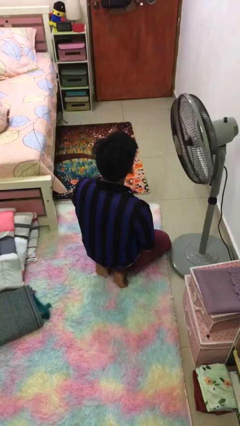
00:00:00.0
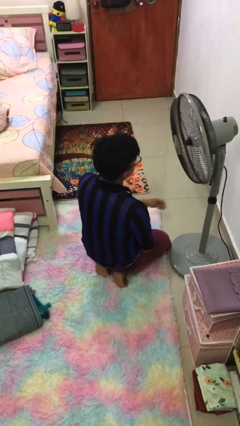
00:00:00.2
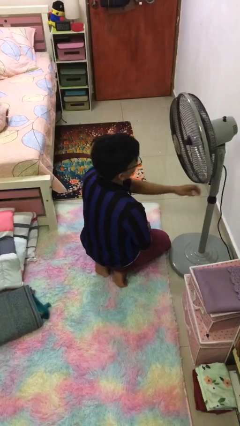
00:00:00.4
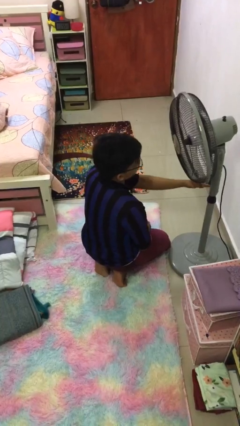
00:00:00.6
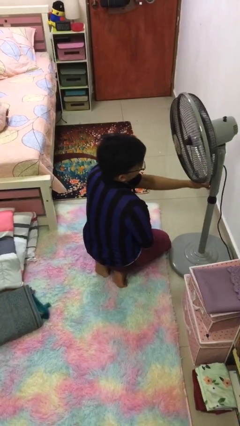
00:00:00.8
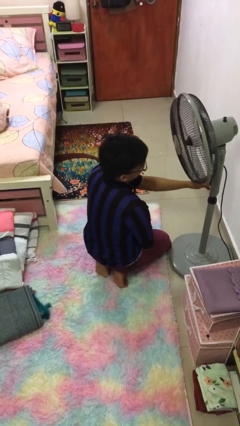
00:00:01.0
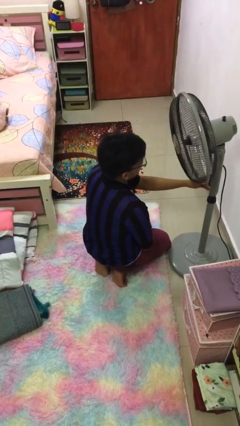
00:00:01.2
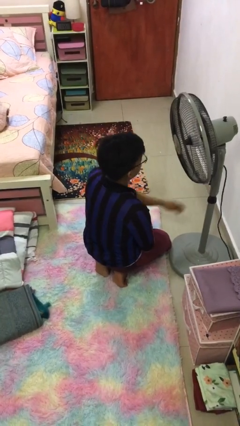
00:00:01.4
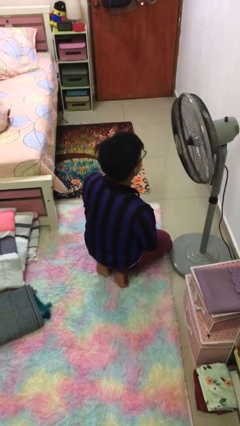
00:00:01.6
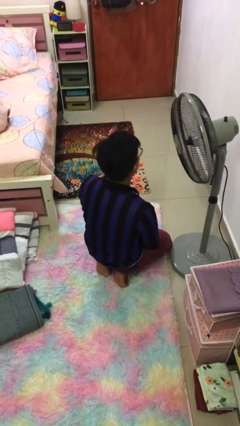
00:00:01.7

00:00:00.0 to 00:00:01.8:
person turns off fan

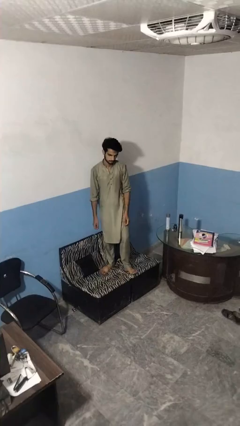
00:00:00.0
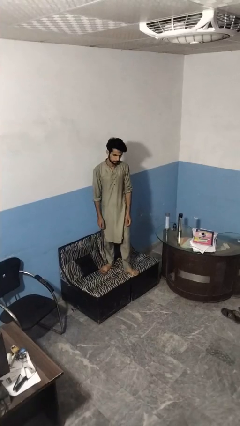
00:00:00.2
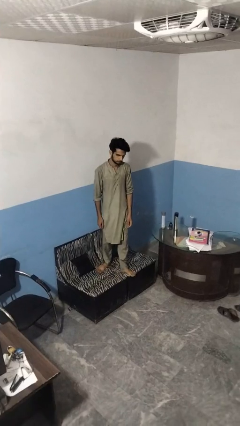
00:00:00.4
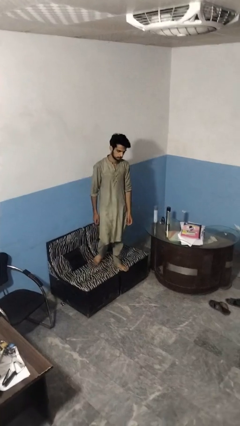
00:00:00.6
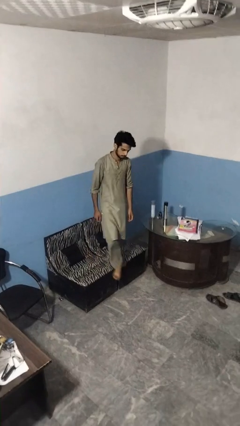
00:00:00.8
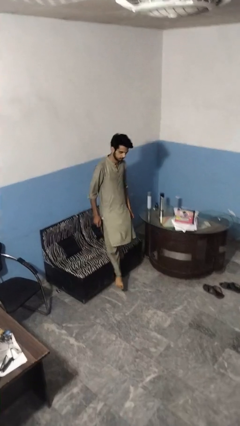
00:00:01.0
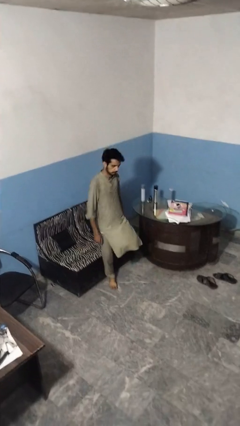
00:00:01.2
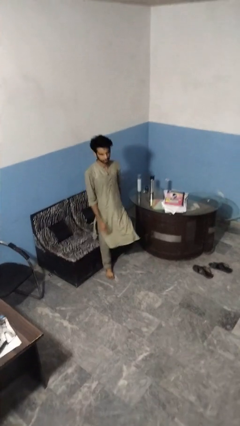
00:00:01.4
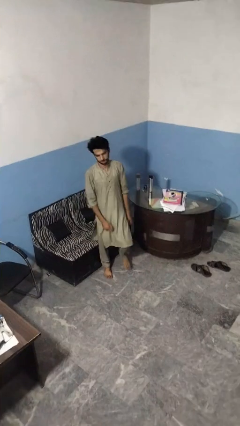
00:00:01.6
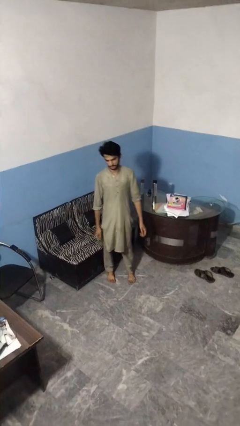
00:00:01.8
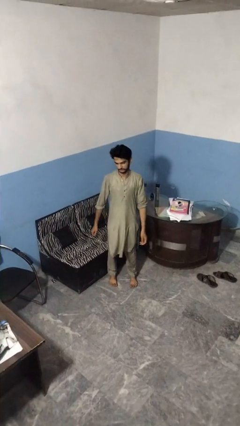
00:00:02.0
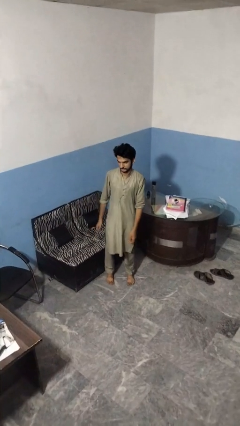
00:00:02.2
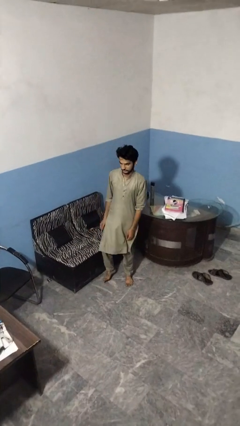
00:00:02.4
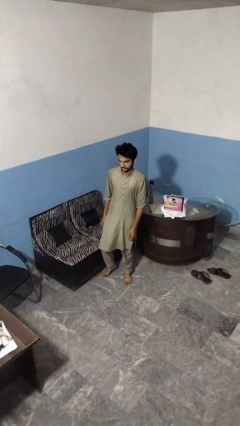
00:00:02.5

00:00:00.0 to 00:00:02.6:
person climbs off couch

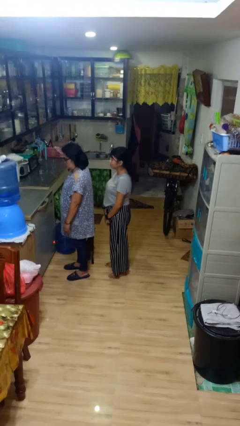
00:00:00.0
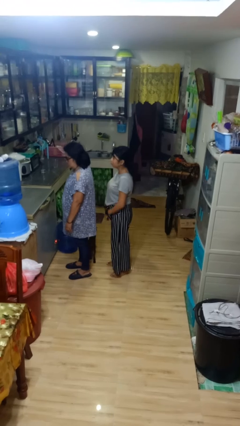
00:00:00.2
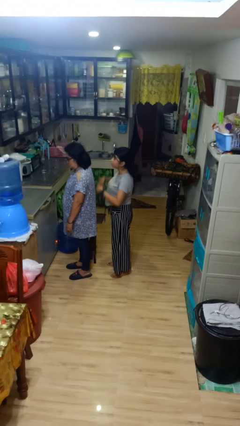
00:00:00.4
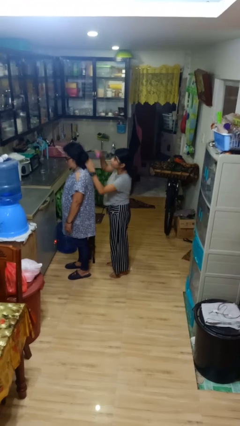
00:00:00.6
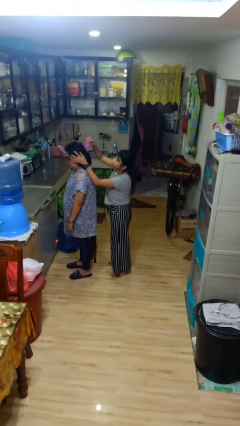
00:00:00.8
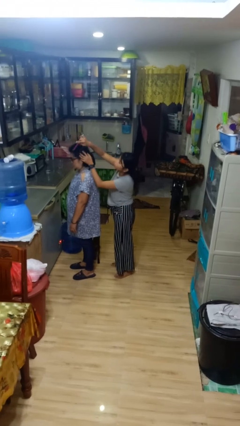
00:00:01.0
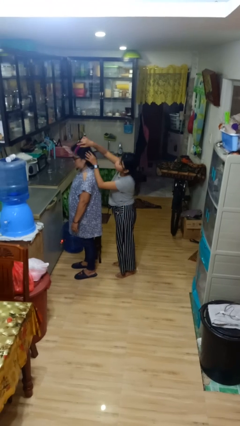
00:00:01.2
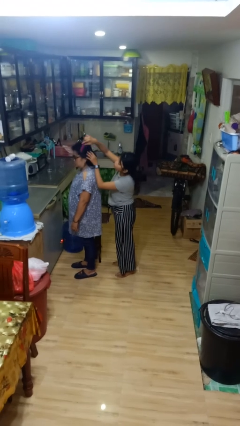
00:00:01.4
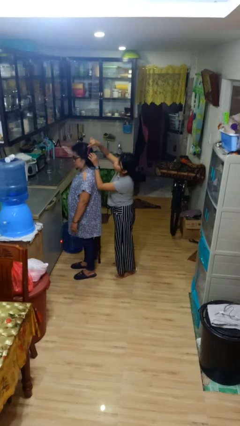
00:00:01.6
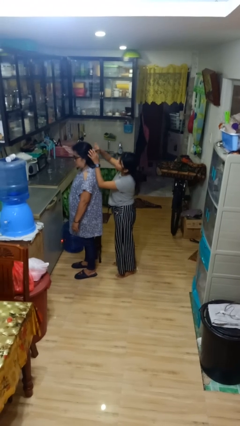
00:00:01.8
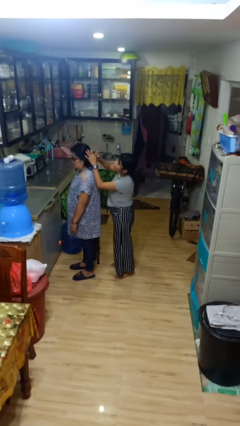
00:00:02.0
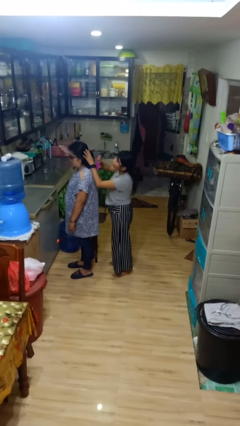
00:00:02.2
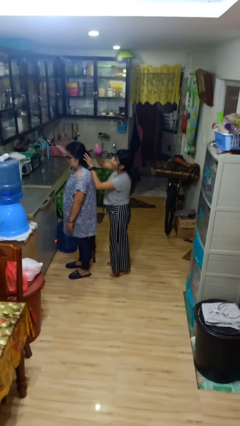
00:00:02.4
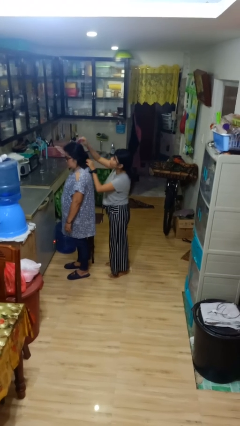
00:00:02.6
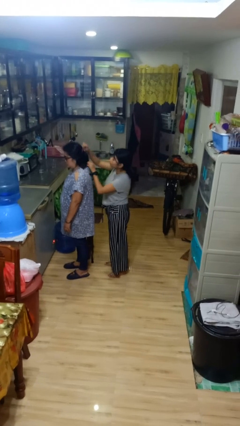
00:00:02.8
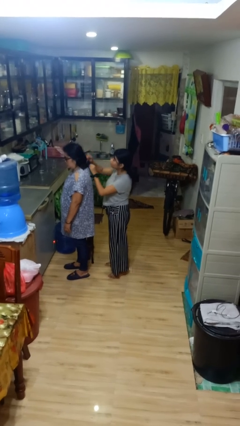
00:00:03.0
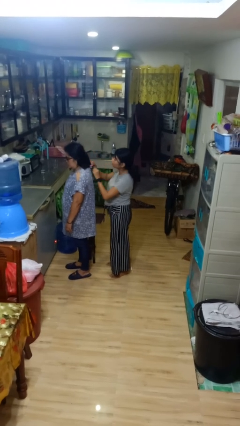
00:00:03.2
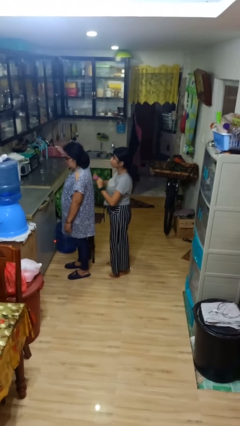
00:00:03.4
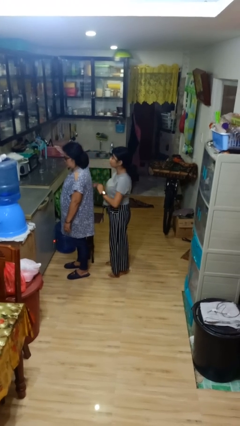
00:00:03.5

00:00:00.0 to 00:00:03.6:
person brushes hair of person

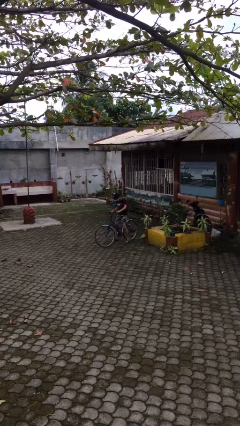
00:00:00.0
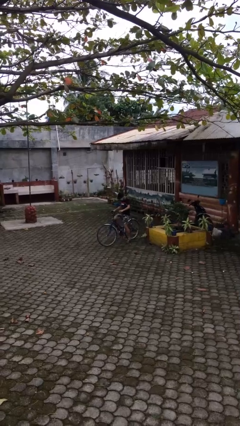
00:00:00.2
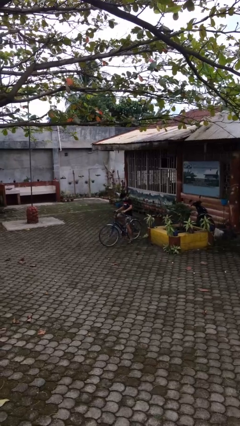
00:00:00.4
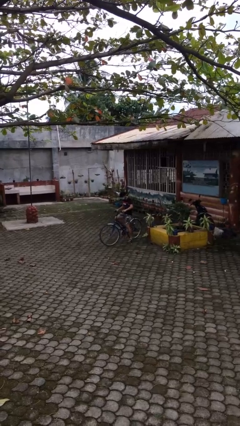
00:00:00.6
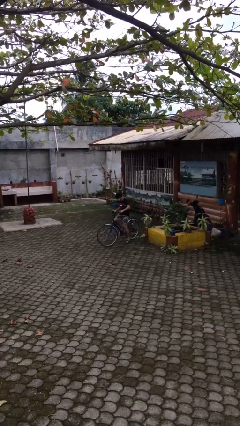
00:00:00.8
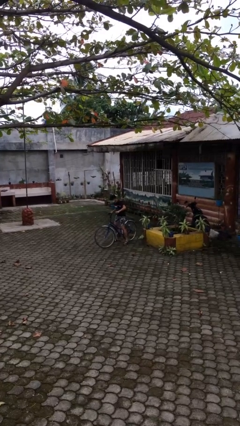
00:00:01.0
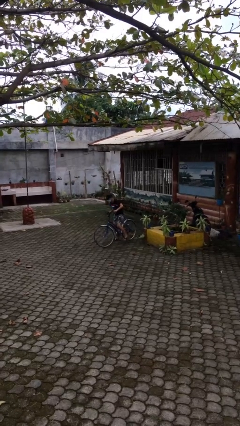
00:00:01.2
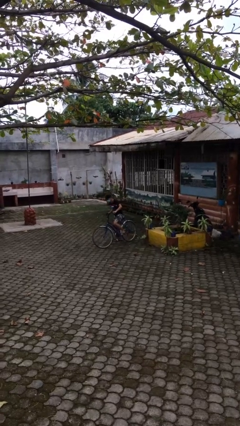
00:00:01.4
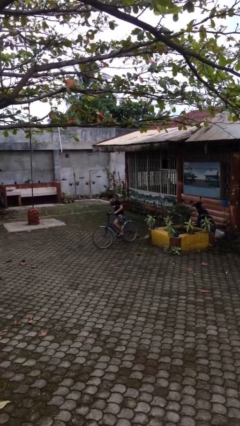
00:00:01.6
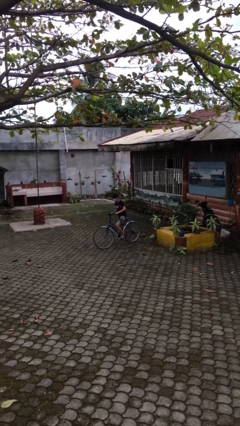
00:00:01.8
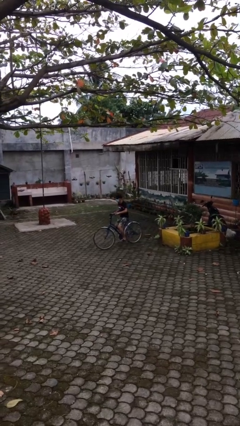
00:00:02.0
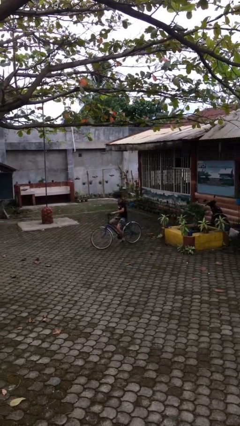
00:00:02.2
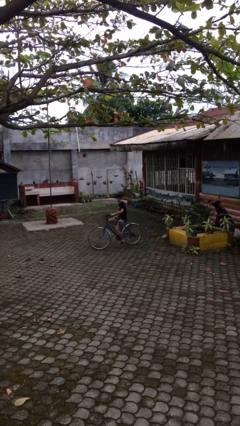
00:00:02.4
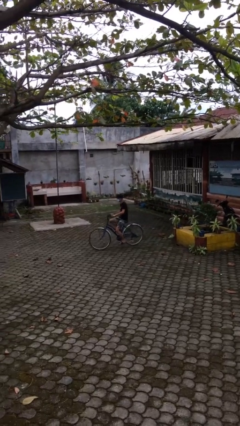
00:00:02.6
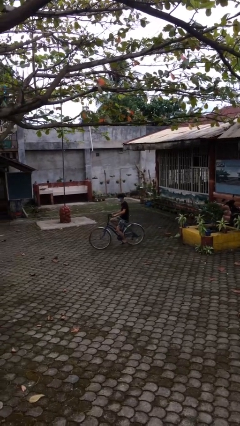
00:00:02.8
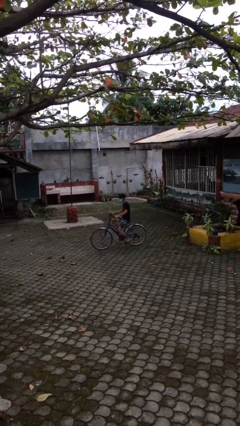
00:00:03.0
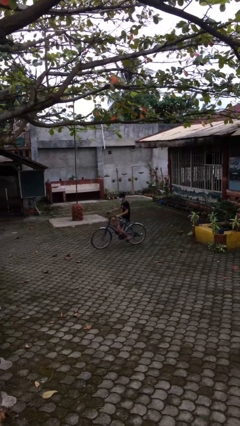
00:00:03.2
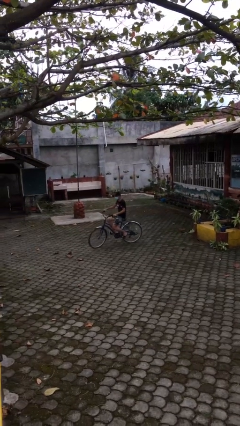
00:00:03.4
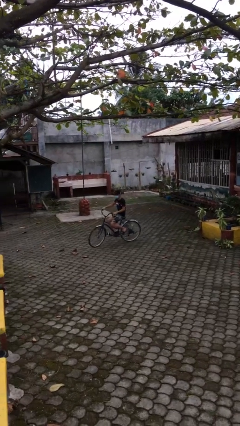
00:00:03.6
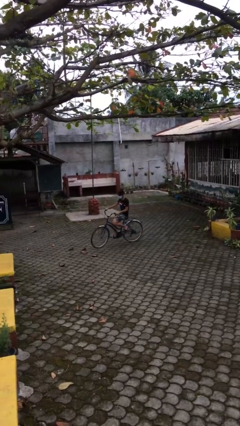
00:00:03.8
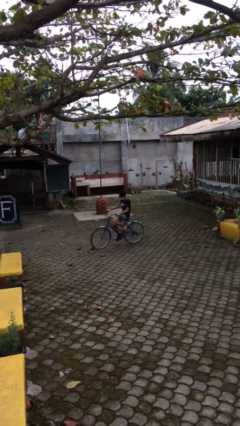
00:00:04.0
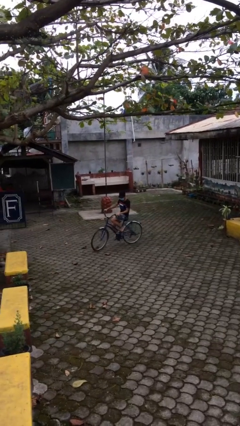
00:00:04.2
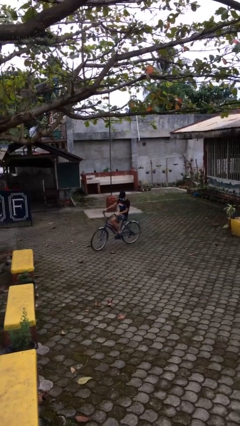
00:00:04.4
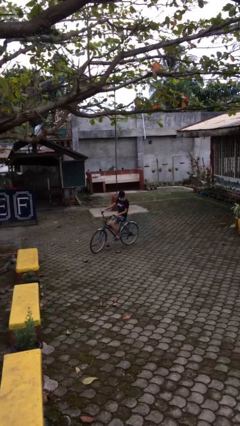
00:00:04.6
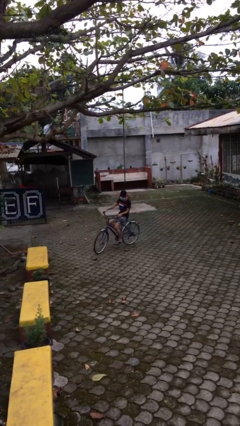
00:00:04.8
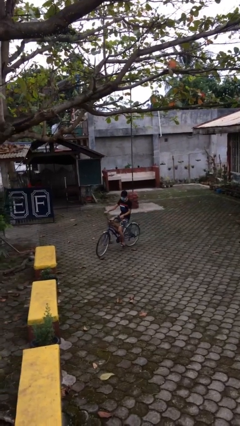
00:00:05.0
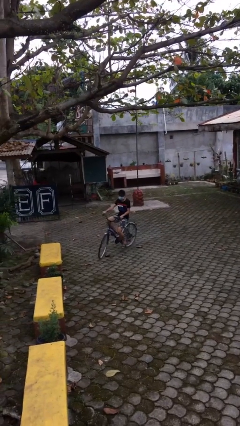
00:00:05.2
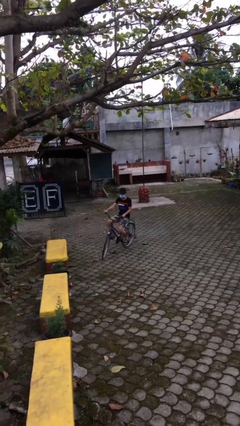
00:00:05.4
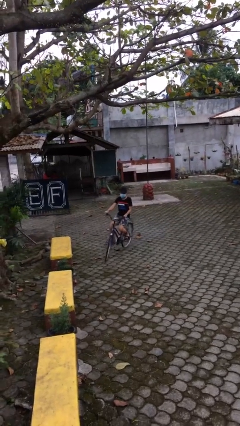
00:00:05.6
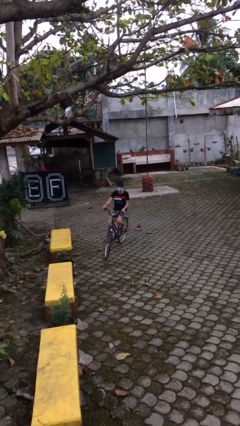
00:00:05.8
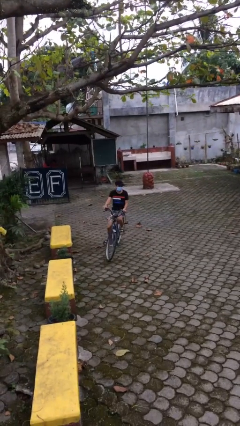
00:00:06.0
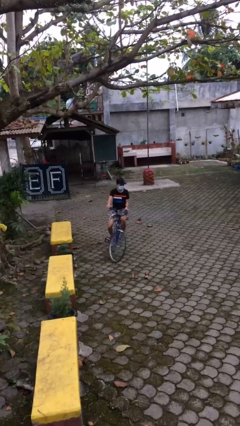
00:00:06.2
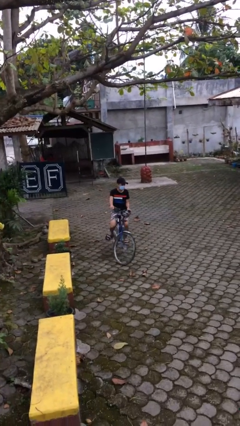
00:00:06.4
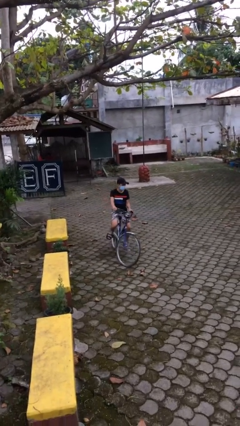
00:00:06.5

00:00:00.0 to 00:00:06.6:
person rides bicycle

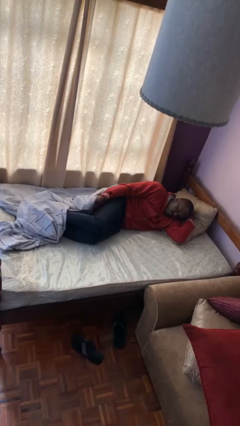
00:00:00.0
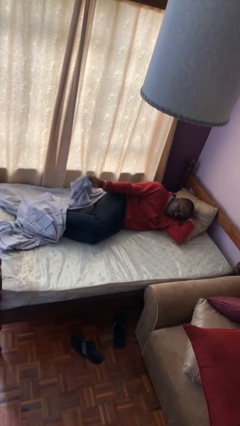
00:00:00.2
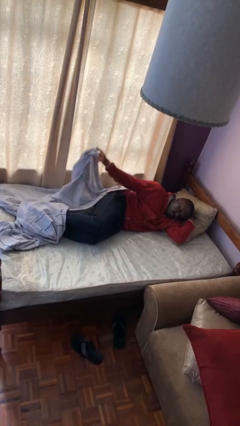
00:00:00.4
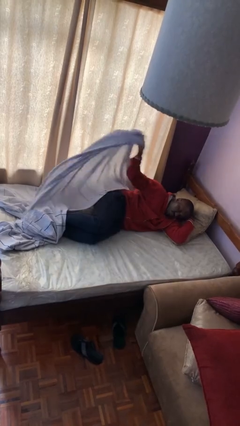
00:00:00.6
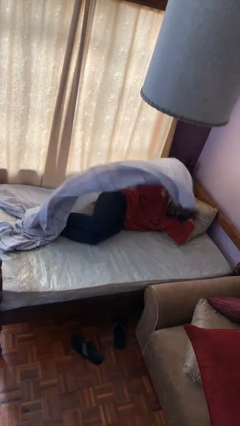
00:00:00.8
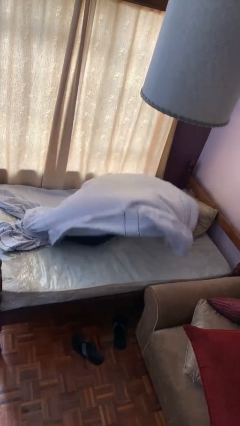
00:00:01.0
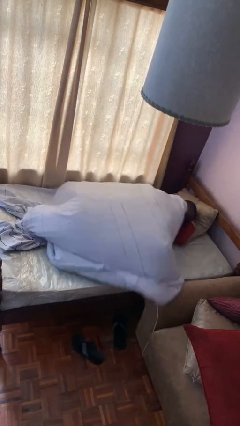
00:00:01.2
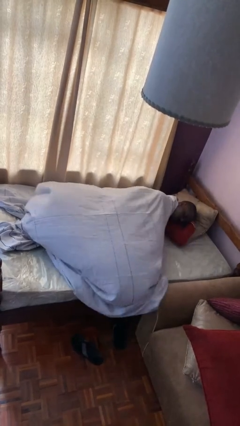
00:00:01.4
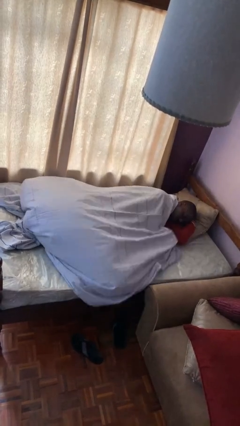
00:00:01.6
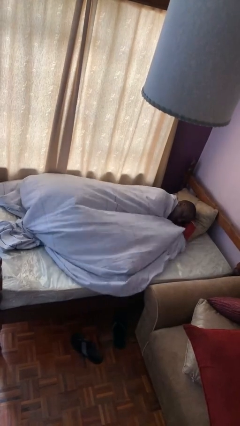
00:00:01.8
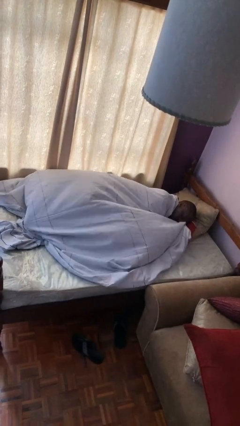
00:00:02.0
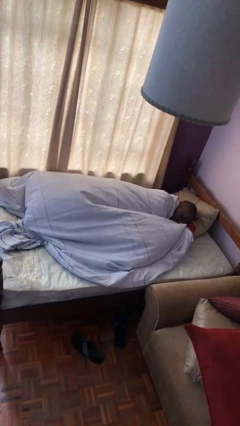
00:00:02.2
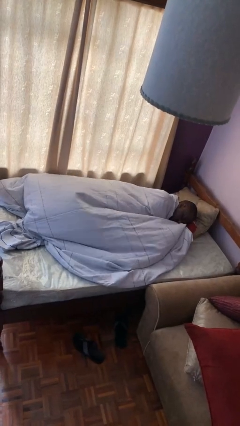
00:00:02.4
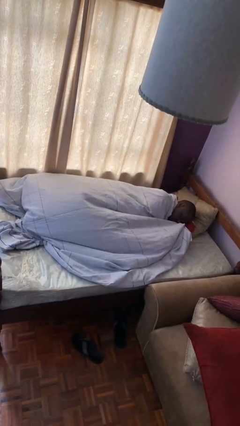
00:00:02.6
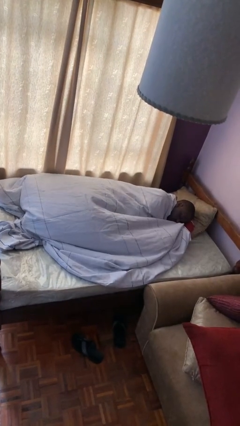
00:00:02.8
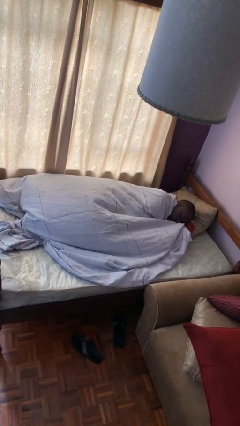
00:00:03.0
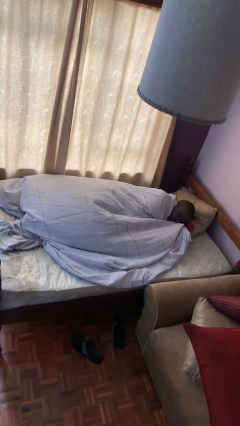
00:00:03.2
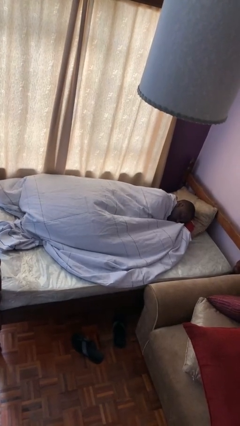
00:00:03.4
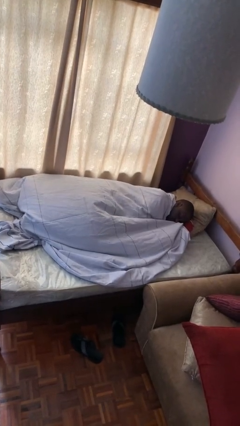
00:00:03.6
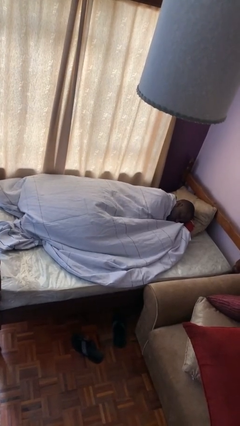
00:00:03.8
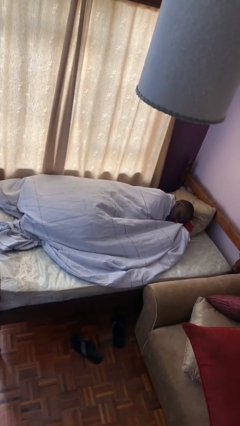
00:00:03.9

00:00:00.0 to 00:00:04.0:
person covers with bedsheets
